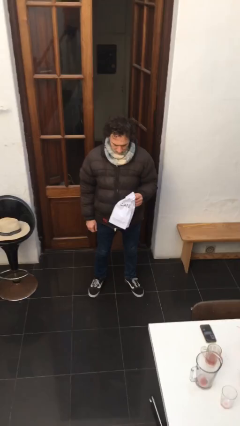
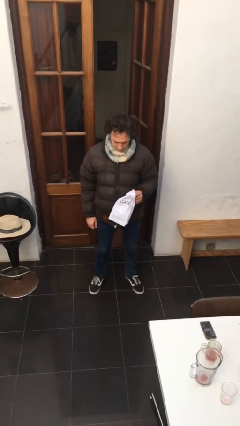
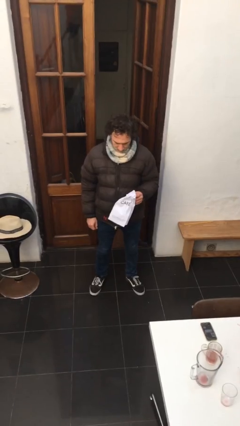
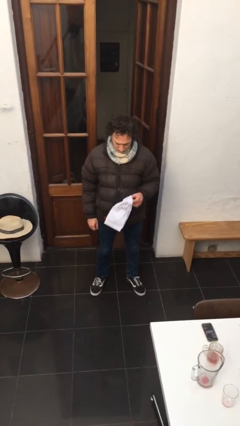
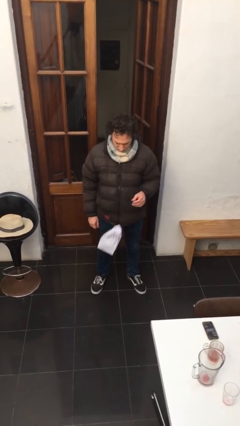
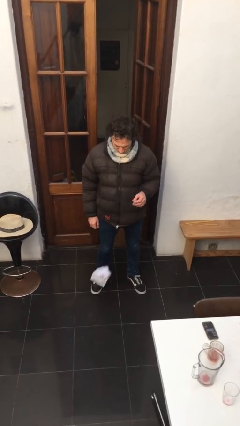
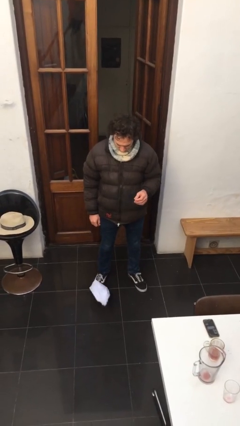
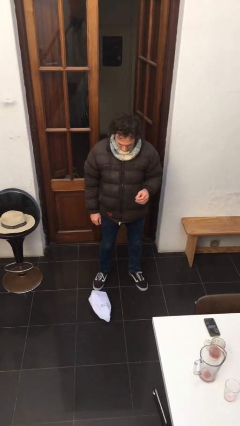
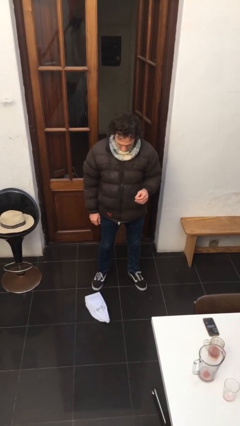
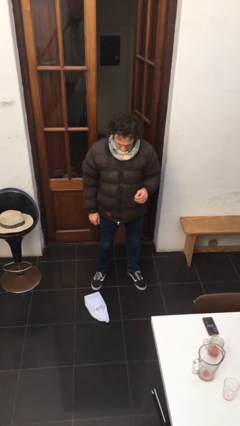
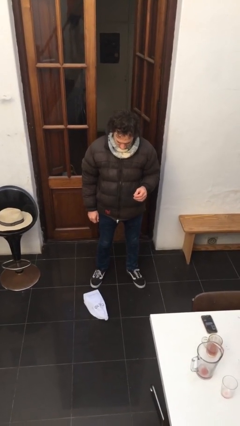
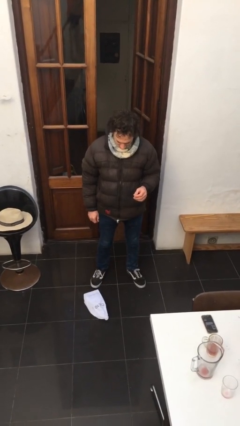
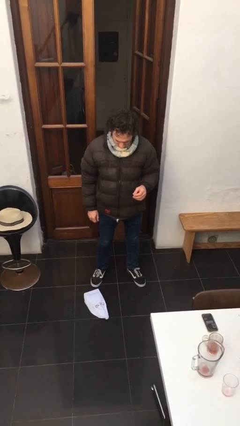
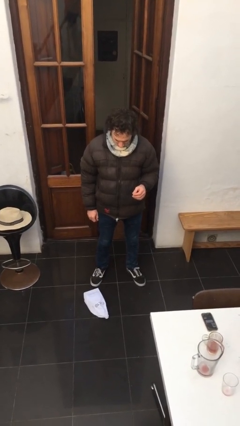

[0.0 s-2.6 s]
person drops object

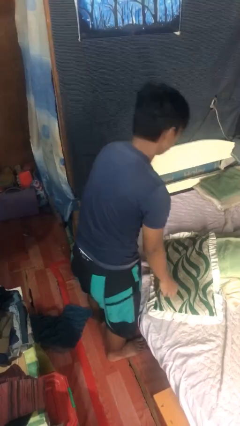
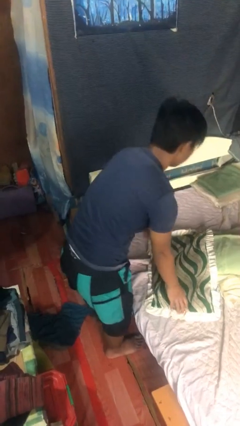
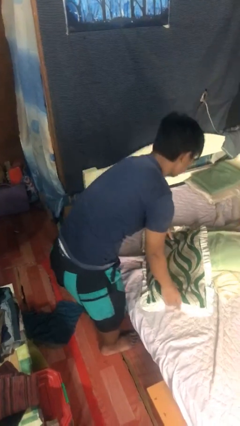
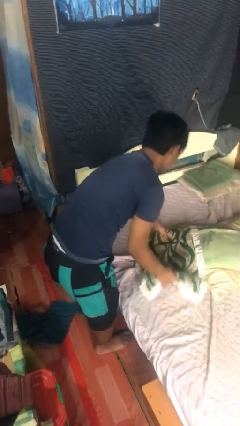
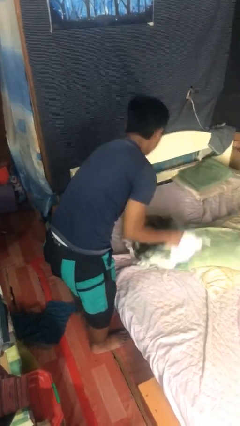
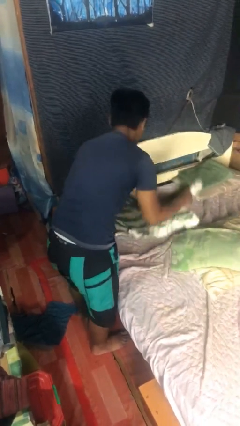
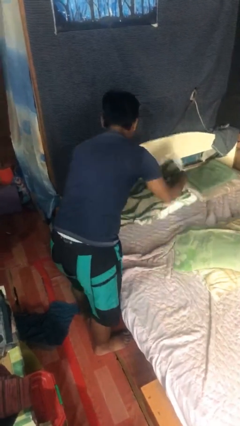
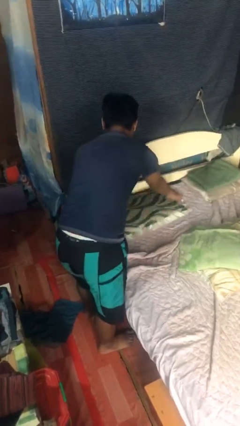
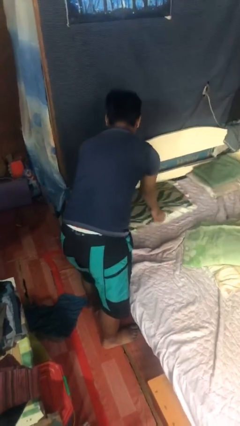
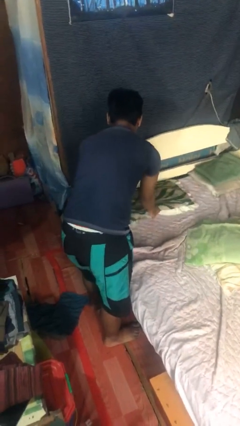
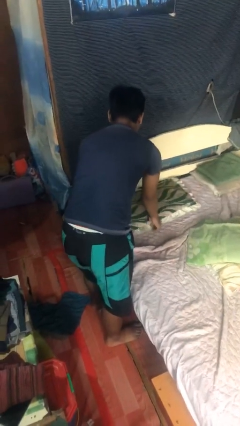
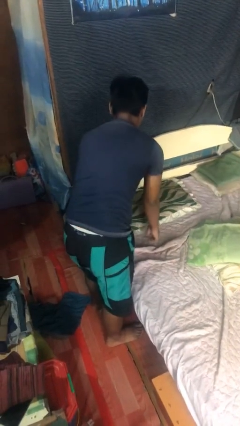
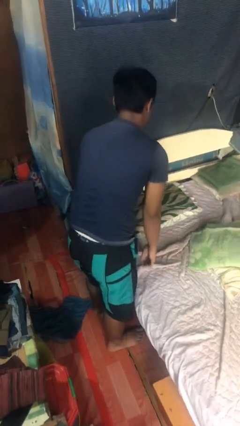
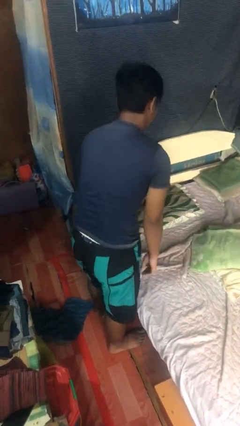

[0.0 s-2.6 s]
person makes bed

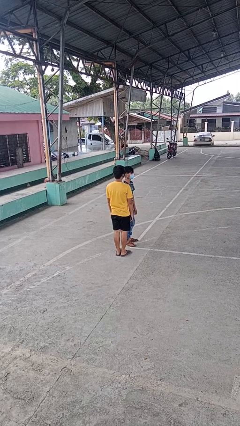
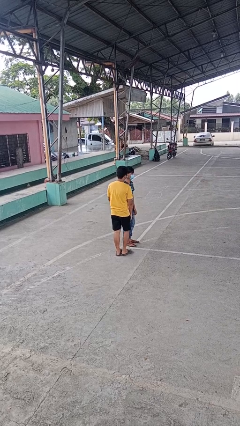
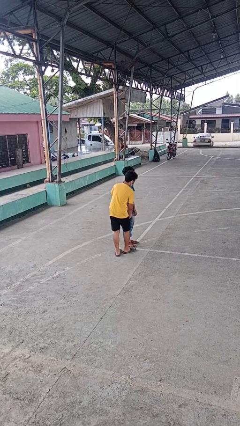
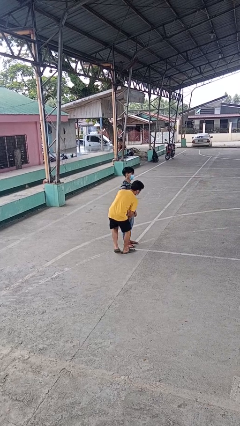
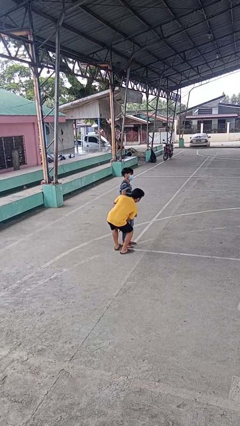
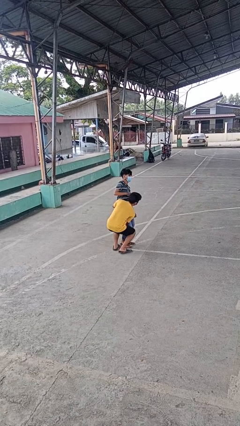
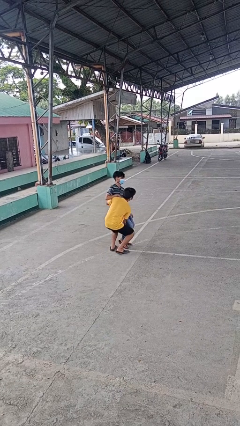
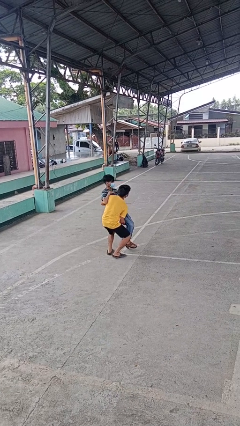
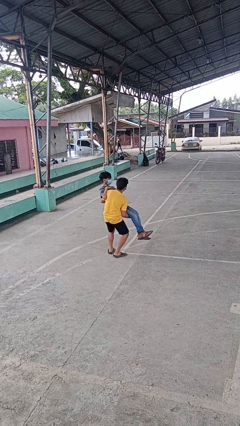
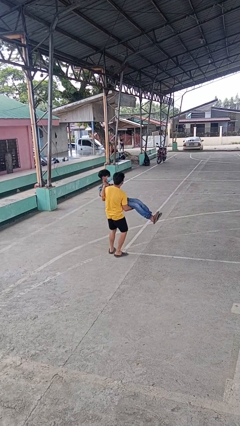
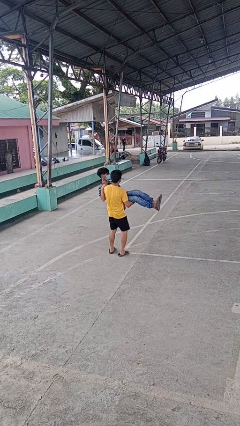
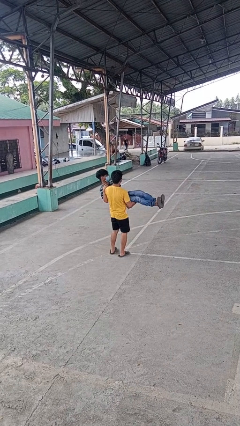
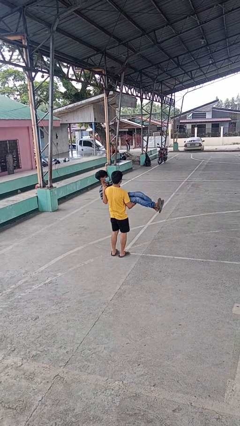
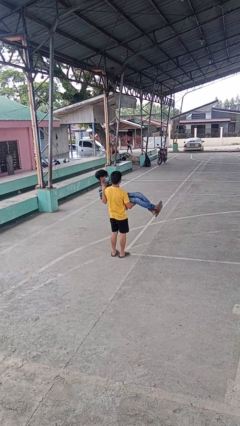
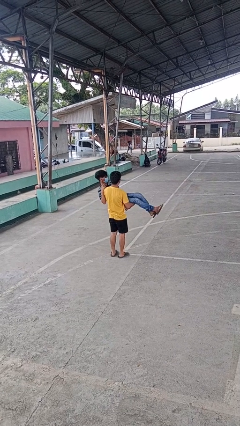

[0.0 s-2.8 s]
person picks up person

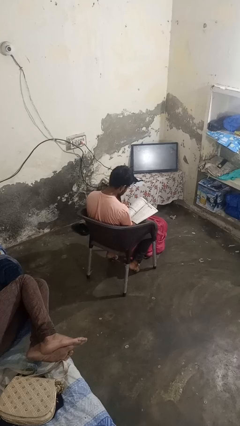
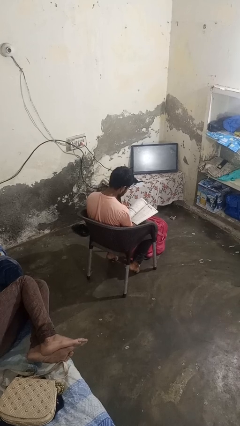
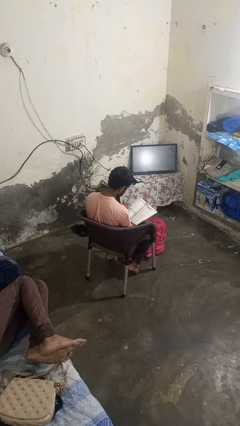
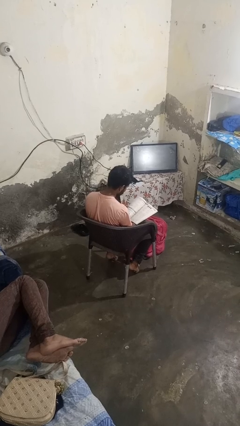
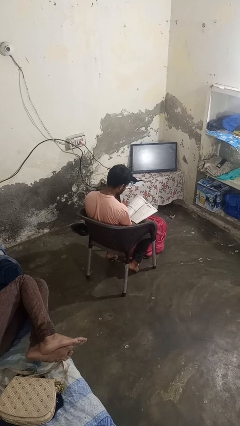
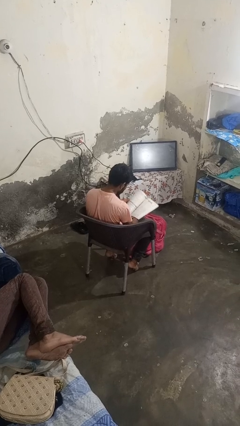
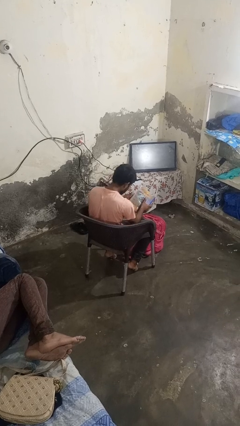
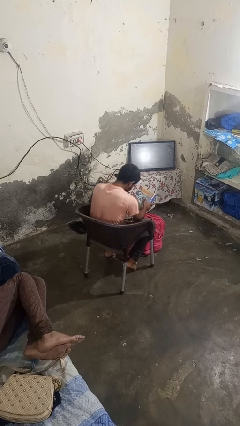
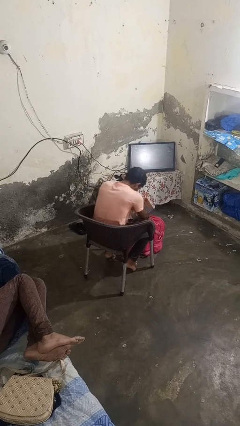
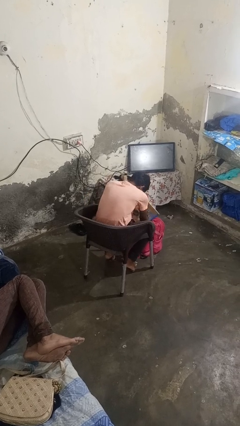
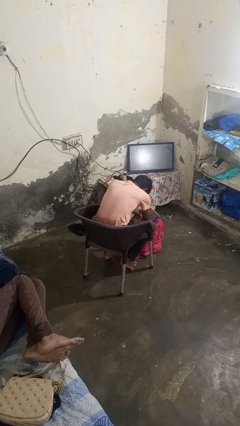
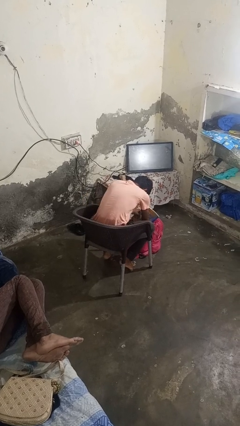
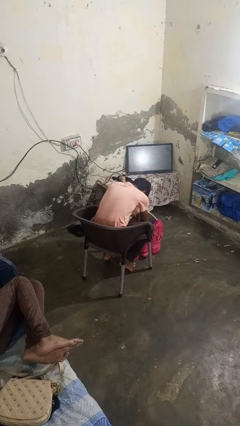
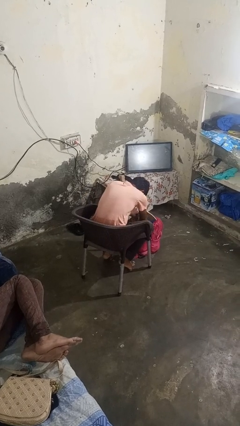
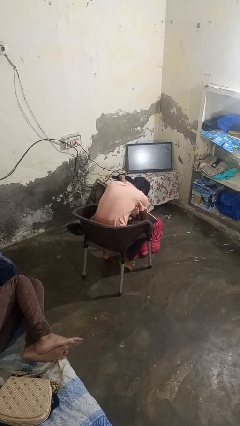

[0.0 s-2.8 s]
person puts object into backpack

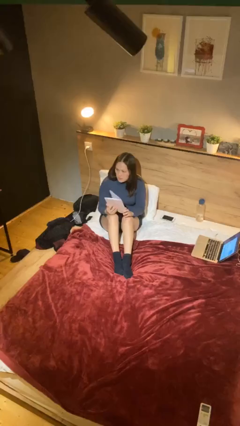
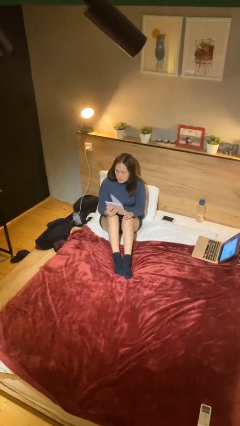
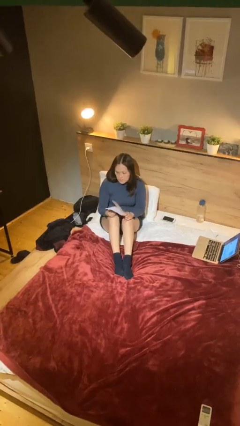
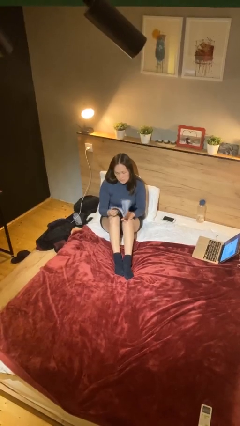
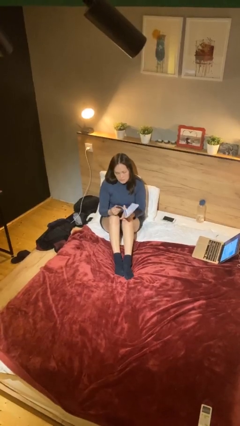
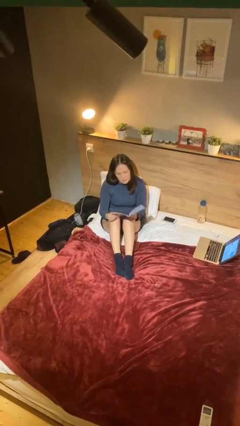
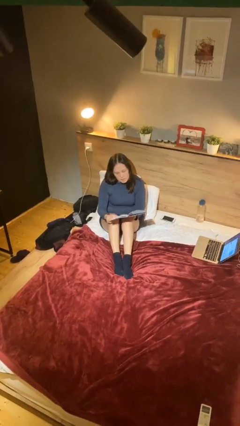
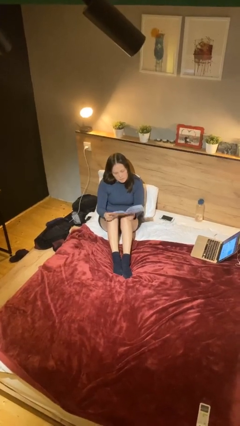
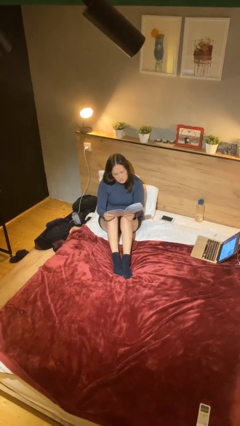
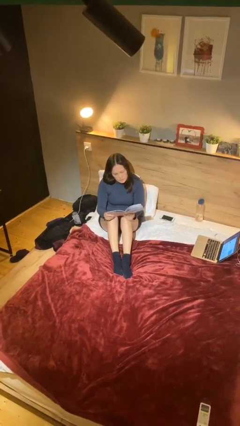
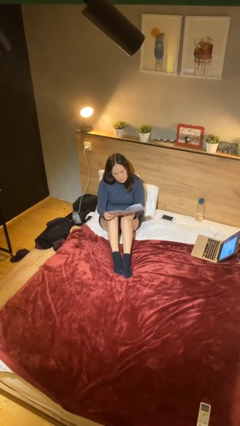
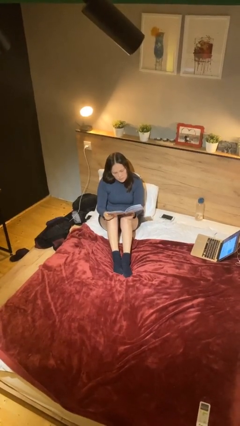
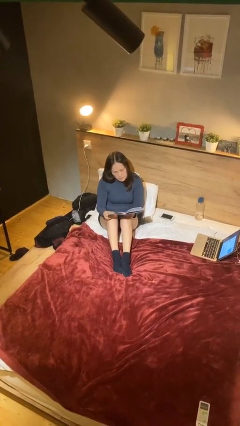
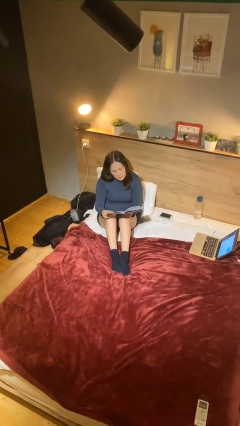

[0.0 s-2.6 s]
person reads document

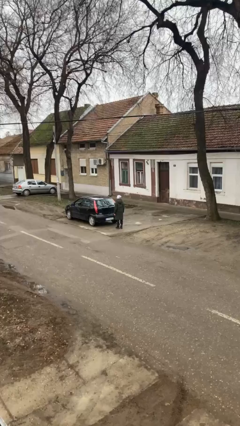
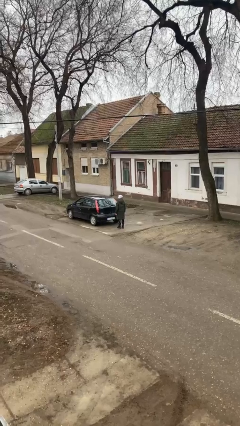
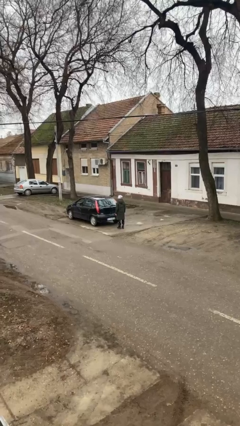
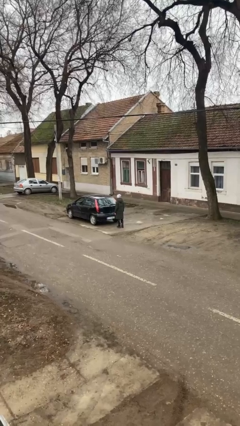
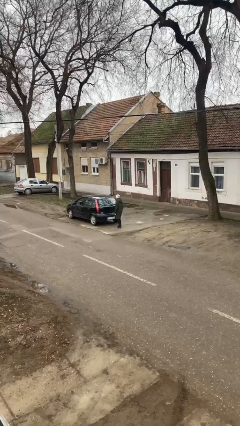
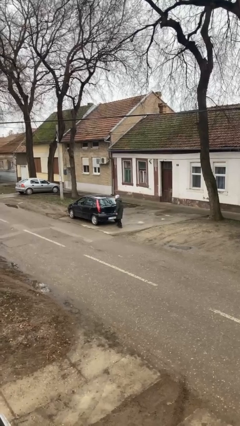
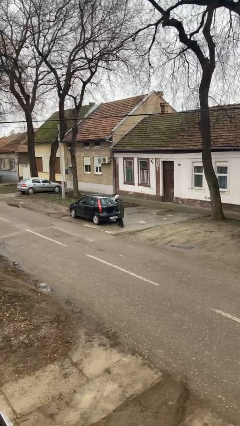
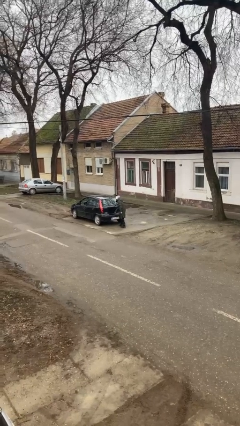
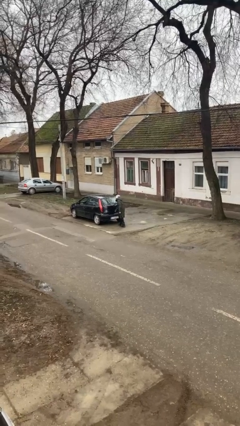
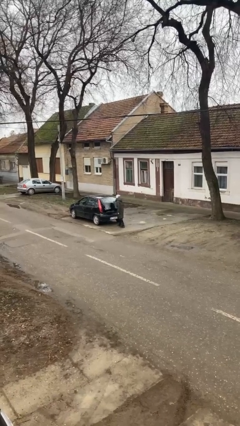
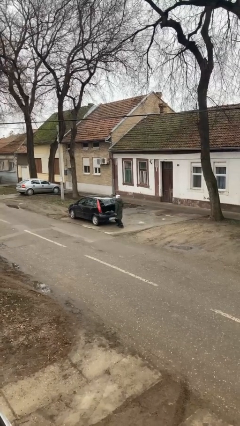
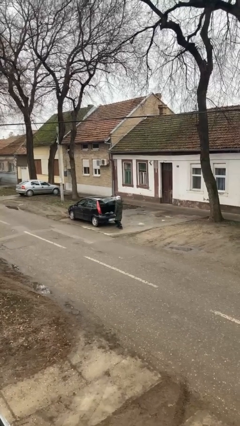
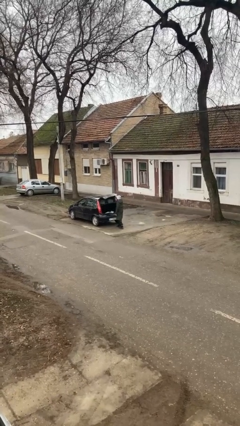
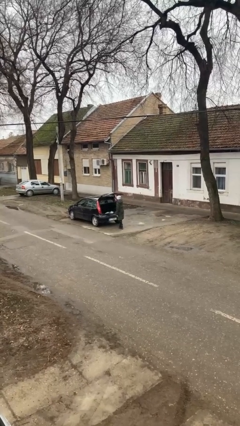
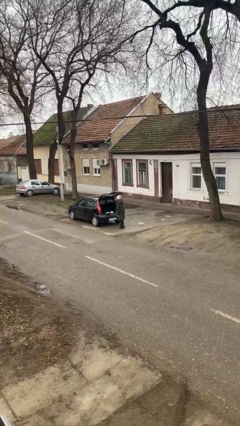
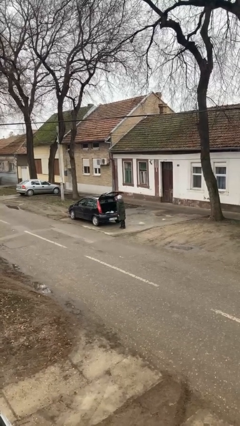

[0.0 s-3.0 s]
person opens car trunk

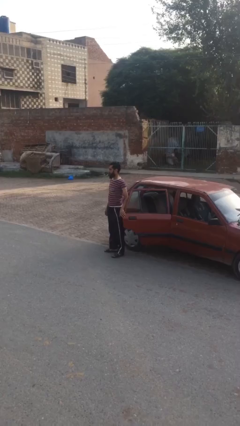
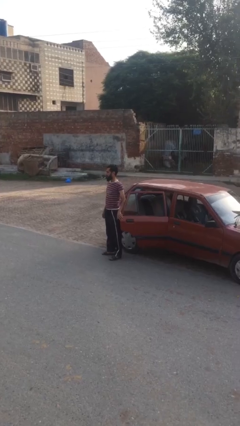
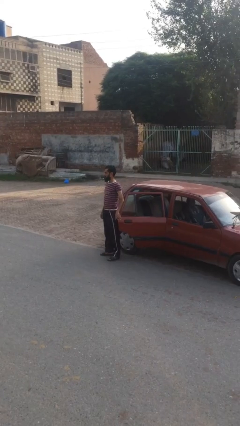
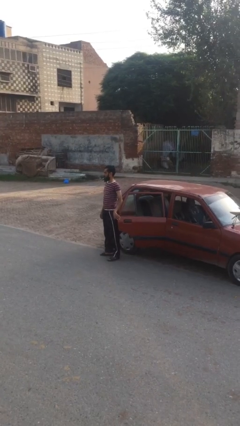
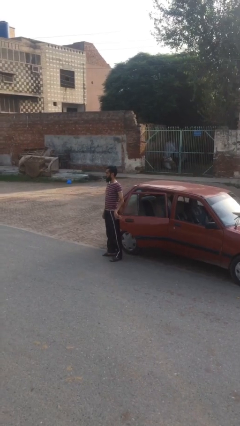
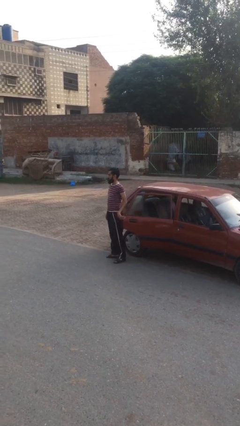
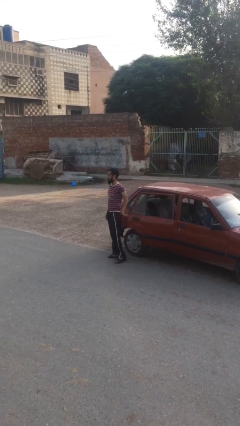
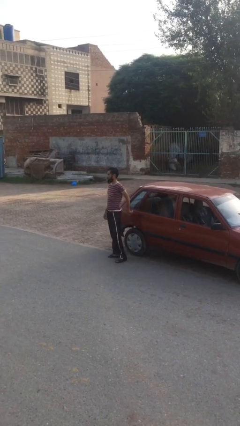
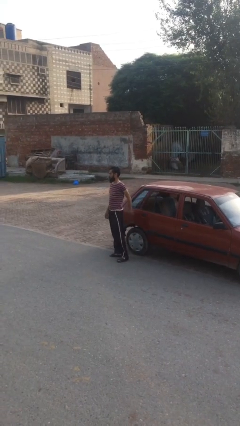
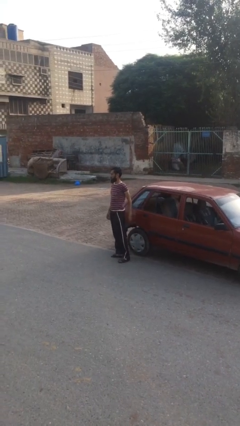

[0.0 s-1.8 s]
person closes car door
